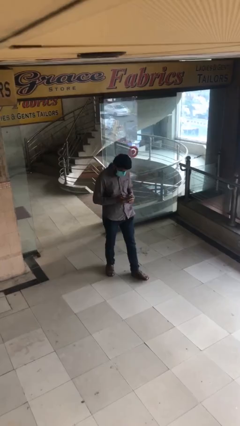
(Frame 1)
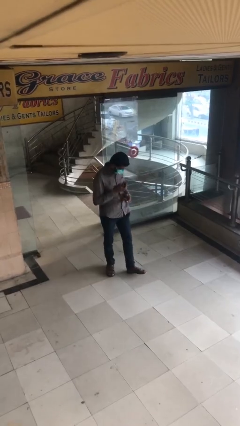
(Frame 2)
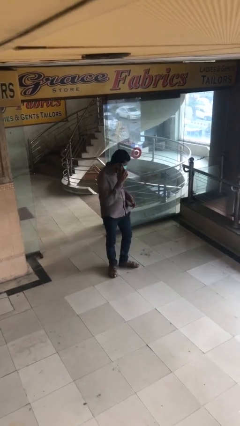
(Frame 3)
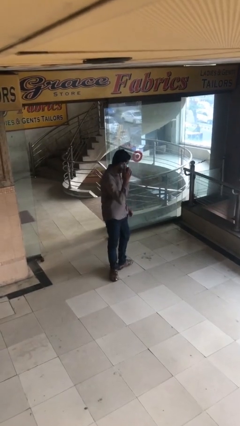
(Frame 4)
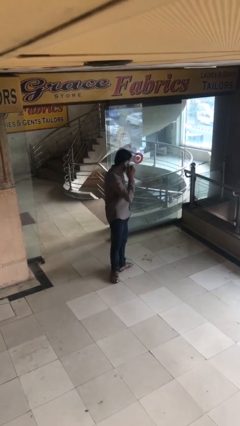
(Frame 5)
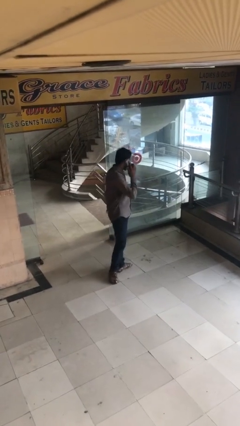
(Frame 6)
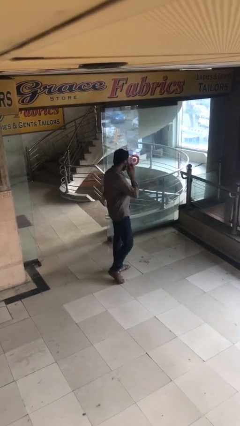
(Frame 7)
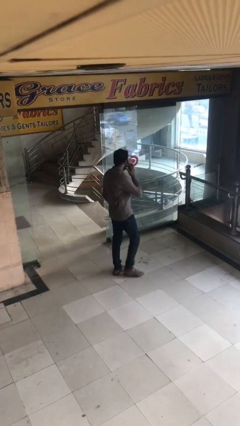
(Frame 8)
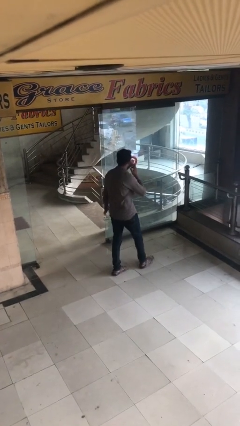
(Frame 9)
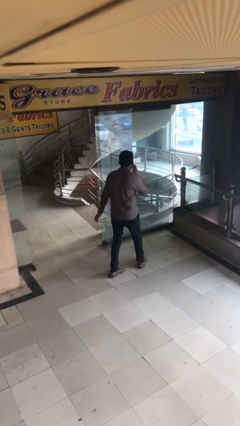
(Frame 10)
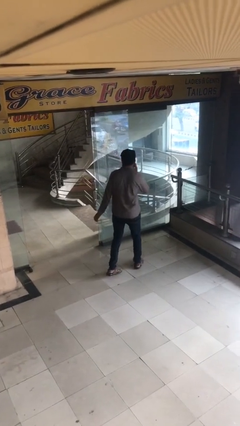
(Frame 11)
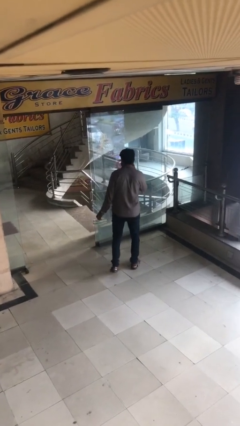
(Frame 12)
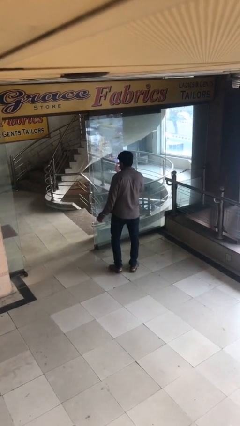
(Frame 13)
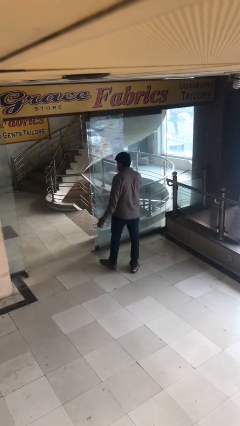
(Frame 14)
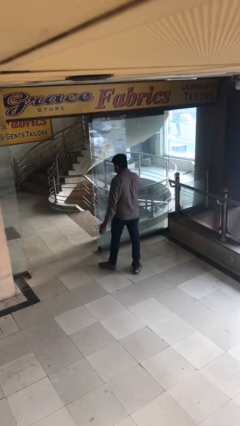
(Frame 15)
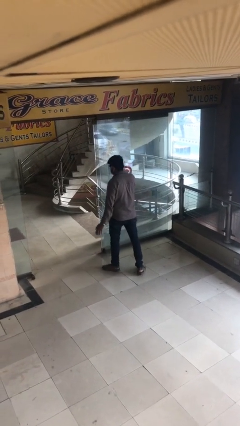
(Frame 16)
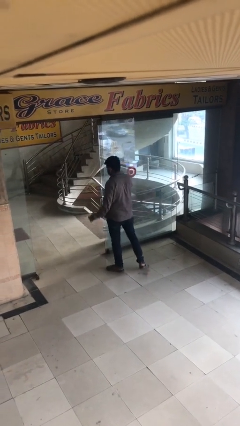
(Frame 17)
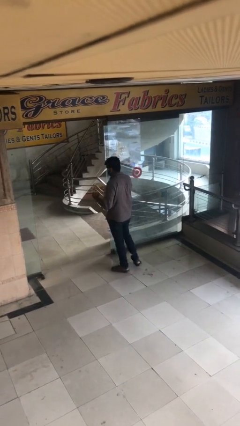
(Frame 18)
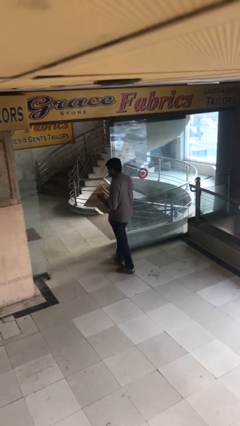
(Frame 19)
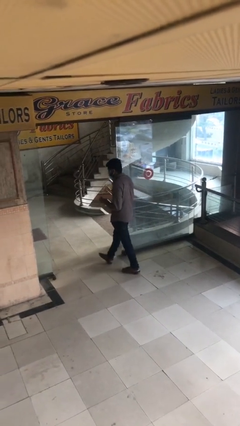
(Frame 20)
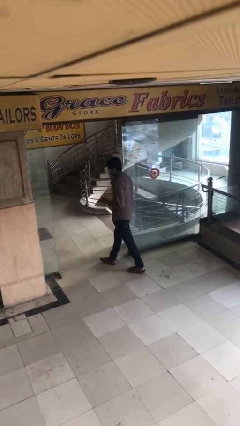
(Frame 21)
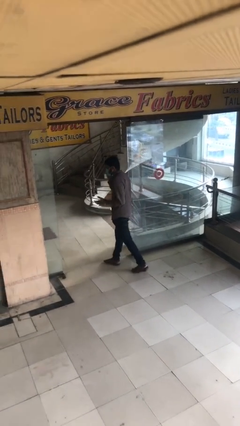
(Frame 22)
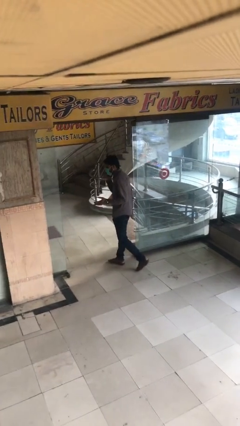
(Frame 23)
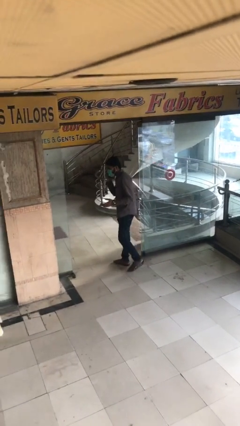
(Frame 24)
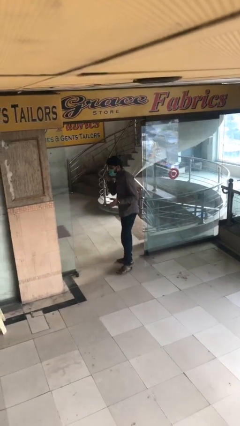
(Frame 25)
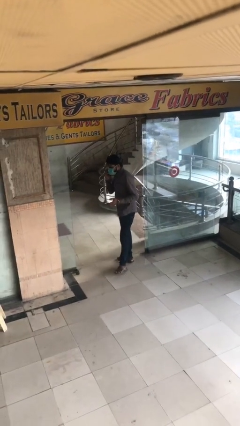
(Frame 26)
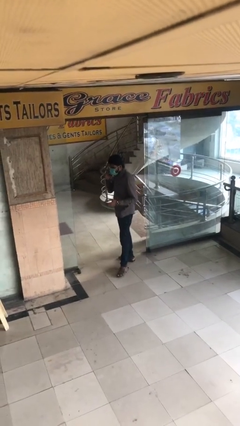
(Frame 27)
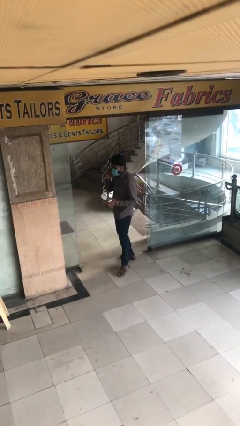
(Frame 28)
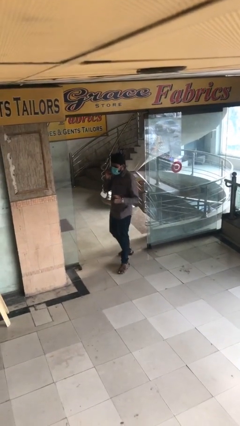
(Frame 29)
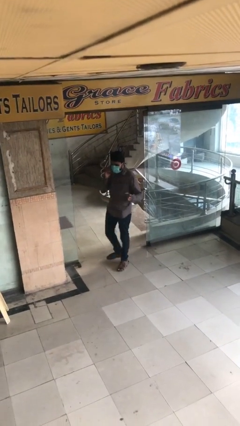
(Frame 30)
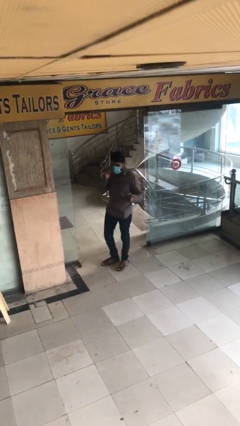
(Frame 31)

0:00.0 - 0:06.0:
person talks on phone

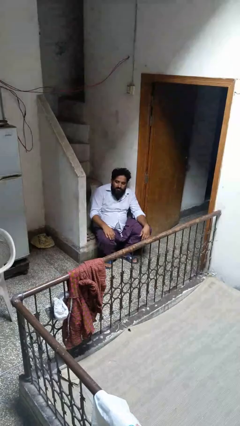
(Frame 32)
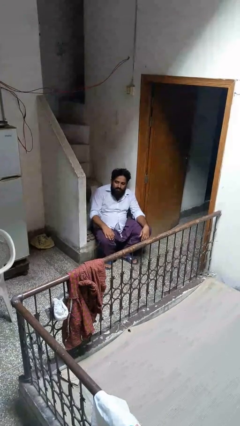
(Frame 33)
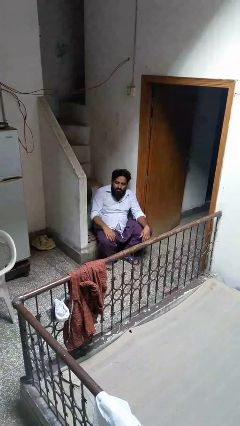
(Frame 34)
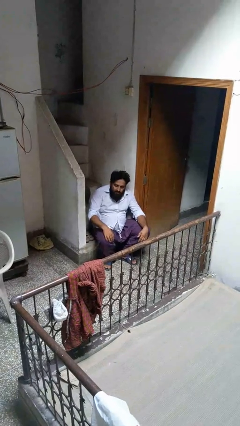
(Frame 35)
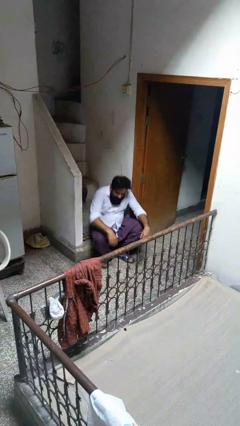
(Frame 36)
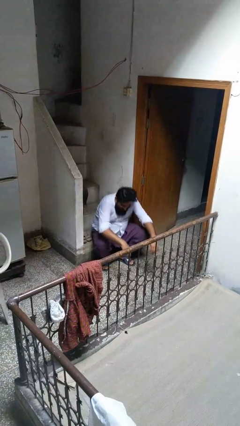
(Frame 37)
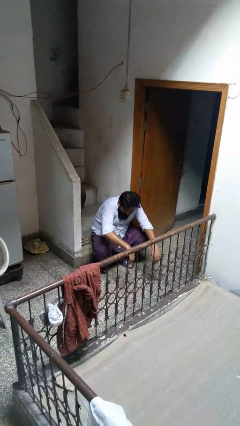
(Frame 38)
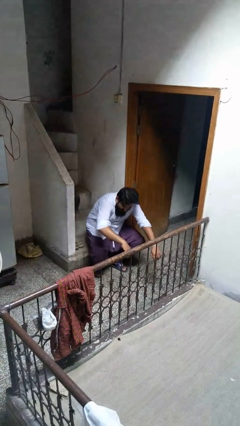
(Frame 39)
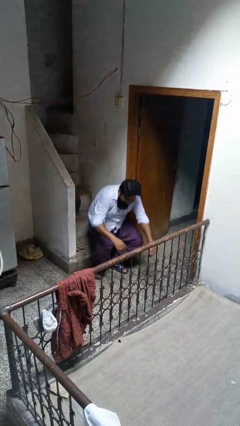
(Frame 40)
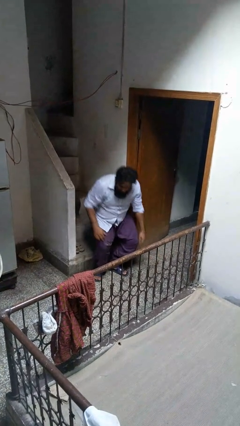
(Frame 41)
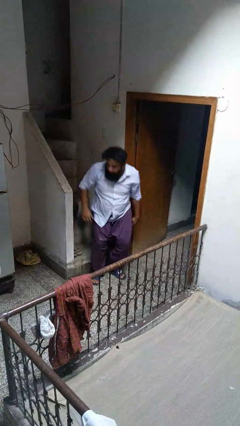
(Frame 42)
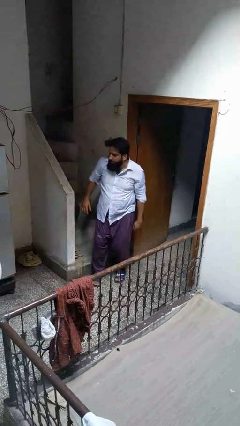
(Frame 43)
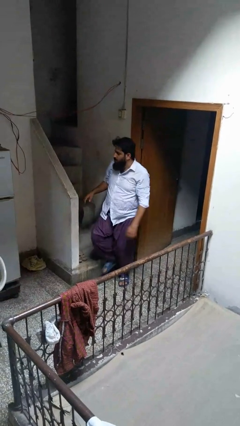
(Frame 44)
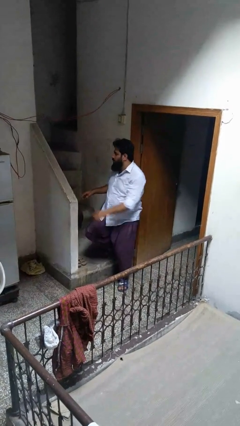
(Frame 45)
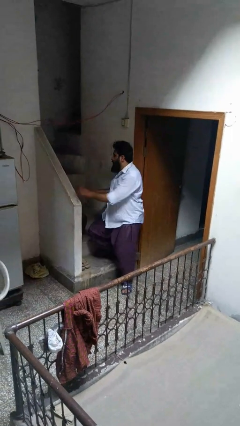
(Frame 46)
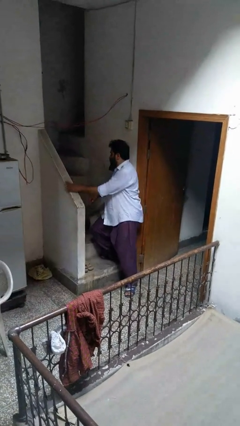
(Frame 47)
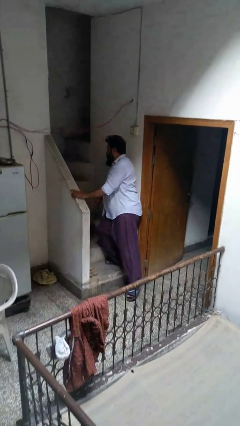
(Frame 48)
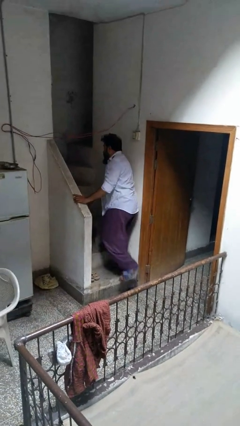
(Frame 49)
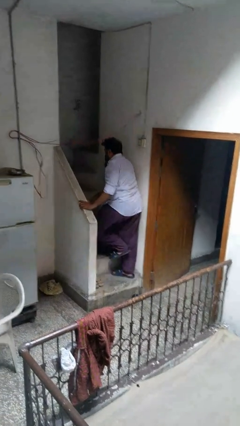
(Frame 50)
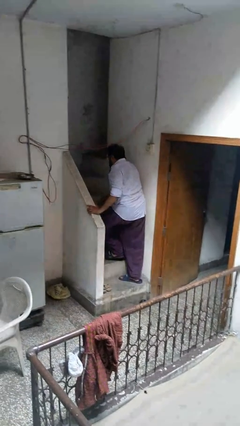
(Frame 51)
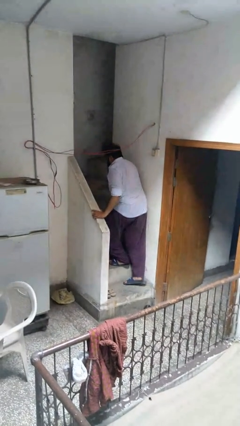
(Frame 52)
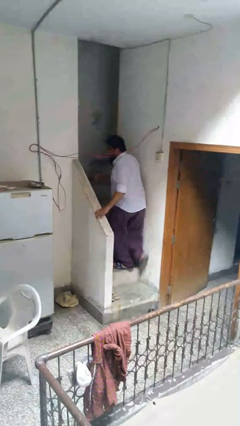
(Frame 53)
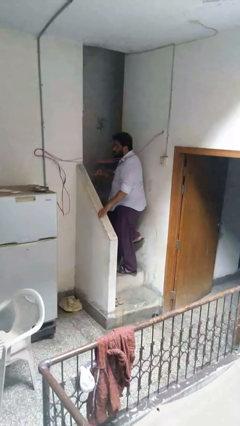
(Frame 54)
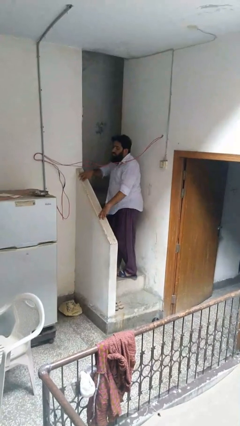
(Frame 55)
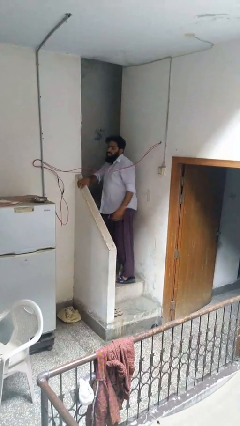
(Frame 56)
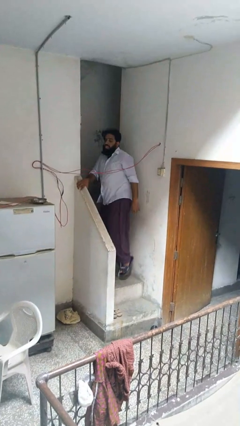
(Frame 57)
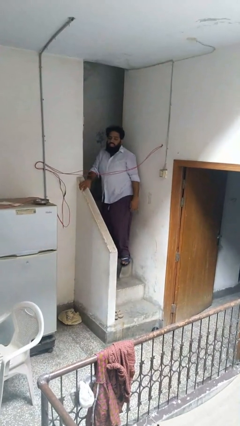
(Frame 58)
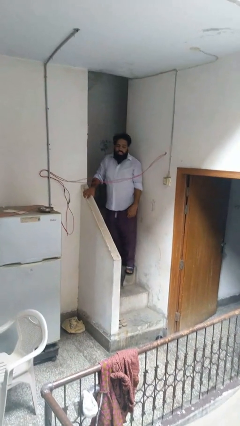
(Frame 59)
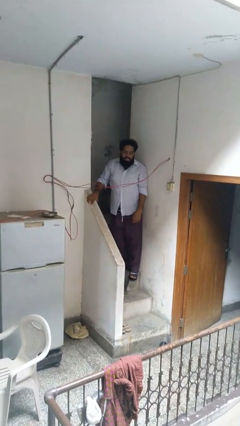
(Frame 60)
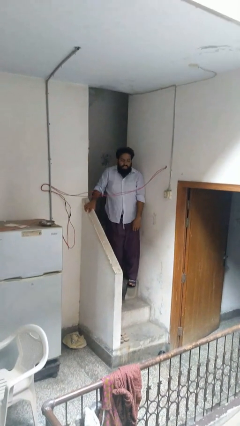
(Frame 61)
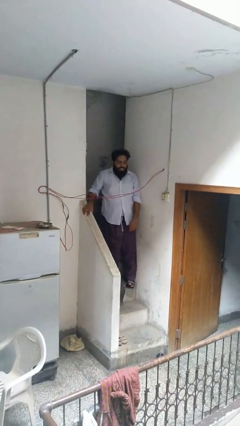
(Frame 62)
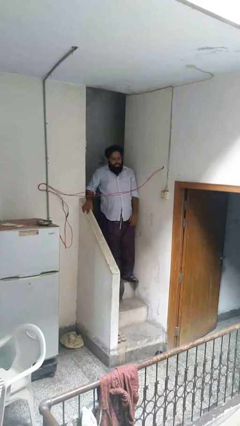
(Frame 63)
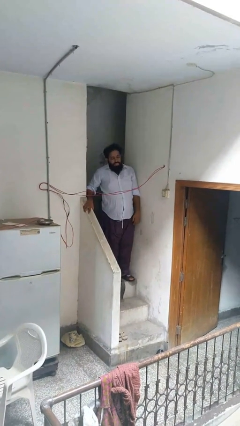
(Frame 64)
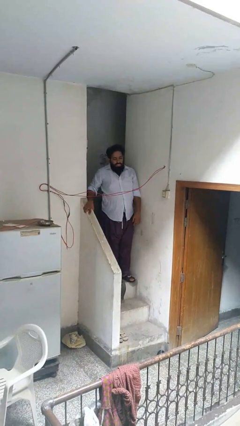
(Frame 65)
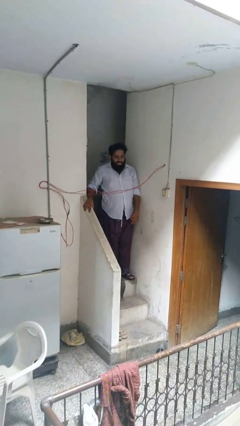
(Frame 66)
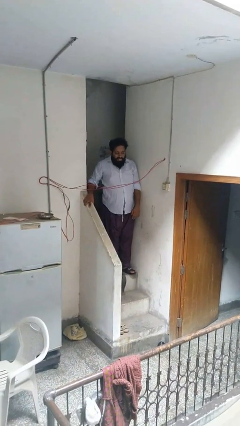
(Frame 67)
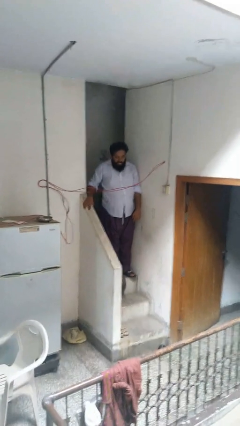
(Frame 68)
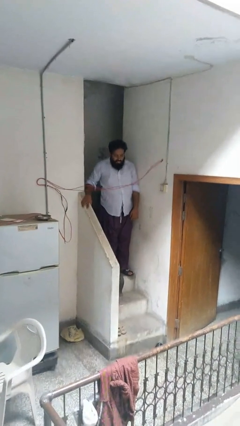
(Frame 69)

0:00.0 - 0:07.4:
person climbs up stairs

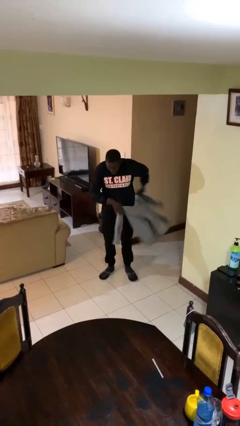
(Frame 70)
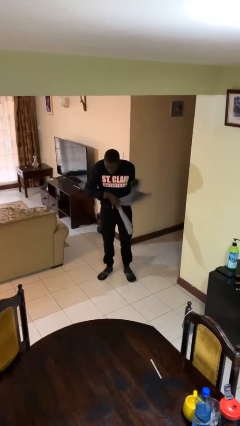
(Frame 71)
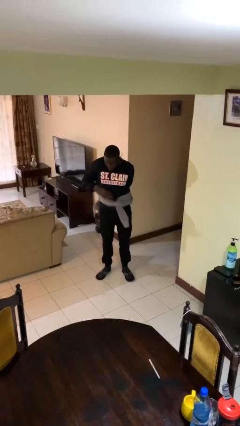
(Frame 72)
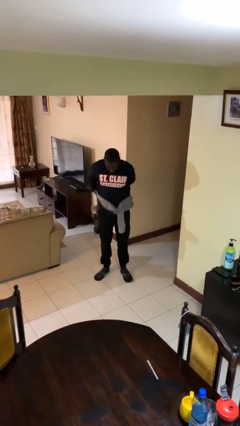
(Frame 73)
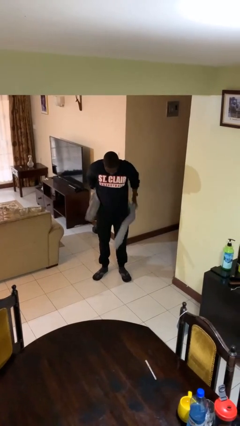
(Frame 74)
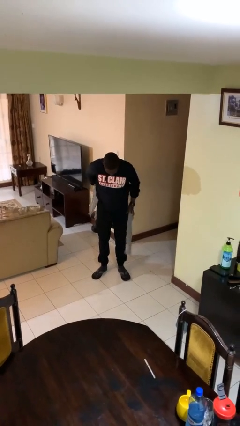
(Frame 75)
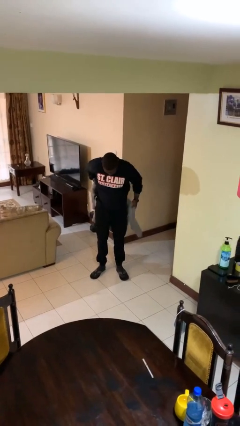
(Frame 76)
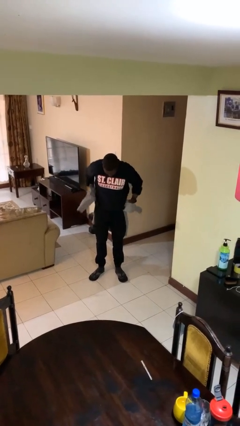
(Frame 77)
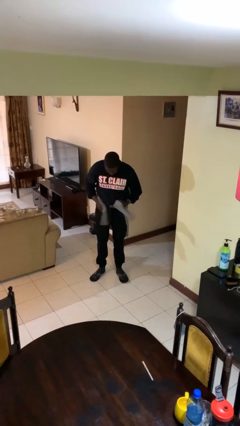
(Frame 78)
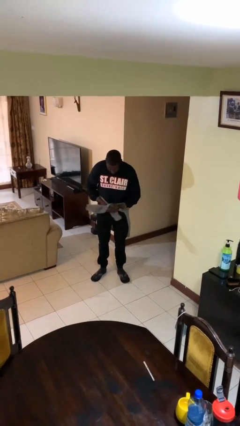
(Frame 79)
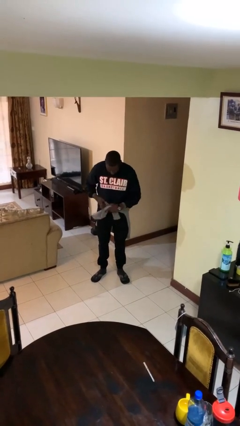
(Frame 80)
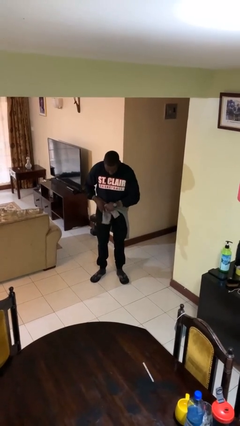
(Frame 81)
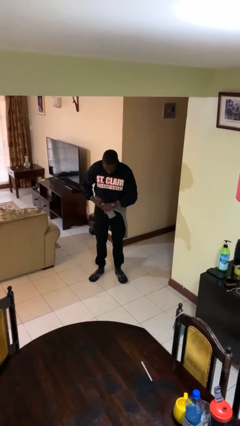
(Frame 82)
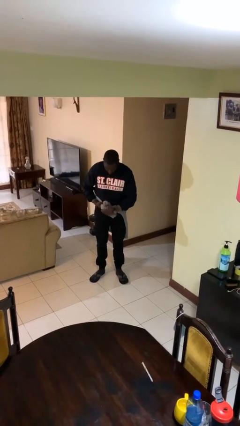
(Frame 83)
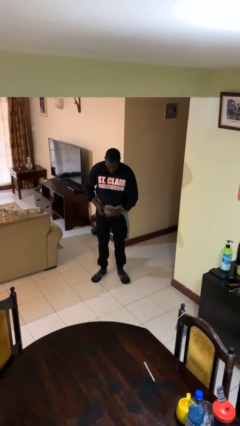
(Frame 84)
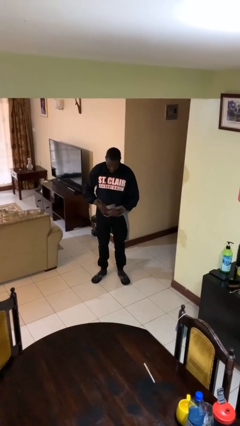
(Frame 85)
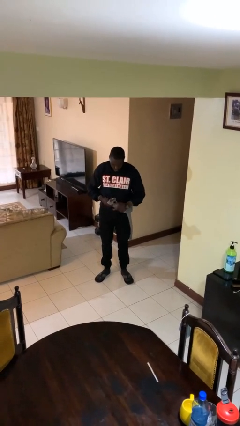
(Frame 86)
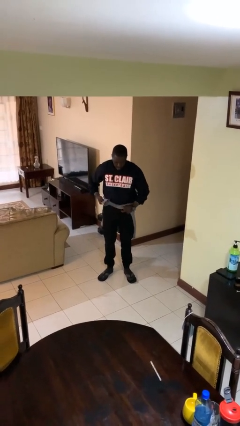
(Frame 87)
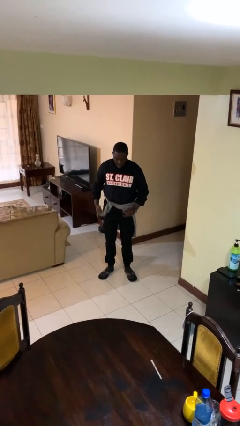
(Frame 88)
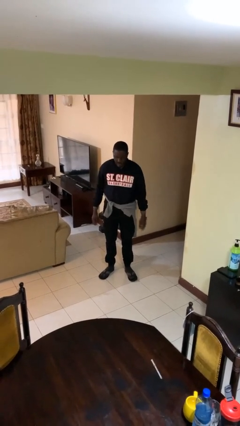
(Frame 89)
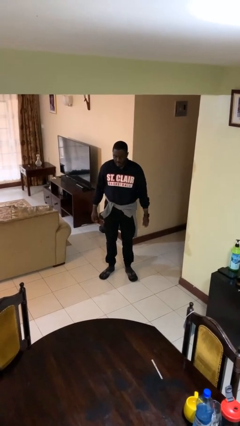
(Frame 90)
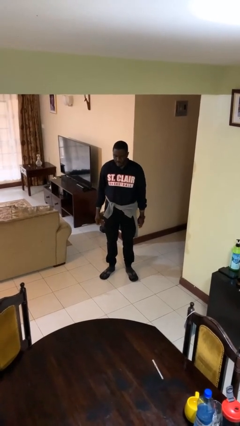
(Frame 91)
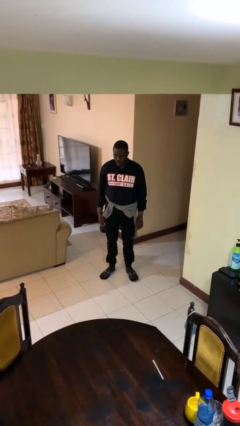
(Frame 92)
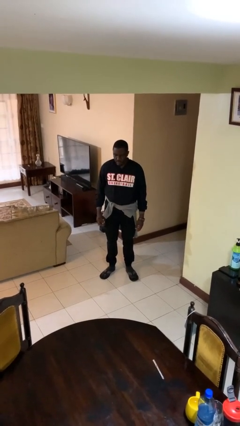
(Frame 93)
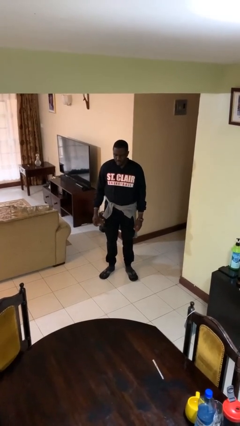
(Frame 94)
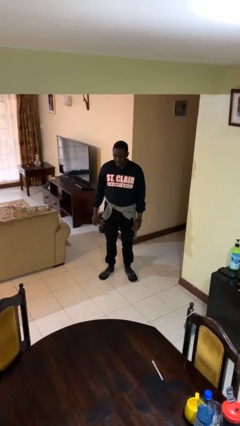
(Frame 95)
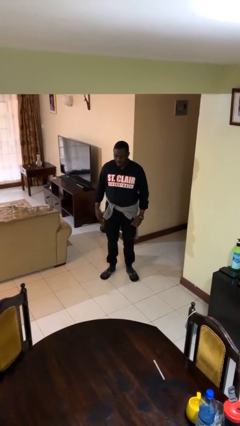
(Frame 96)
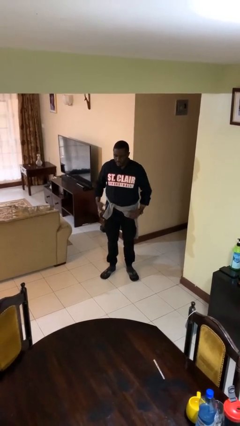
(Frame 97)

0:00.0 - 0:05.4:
person ties jacket around waist
